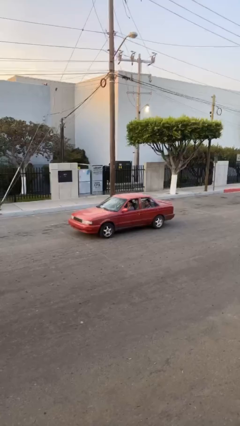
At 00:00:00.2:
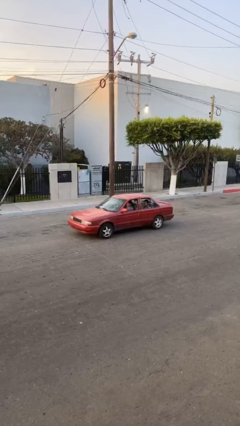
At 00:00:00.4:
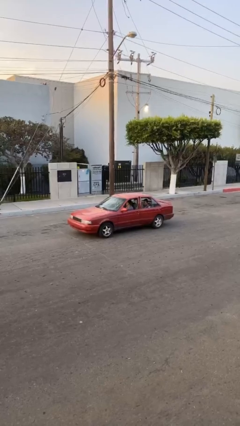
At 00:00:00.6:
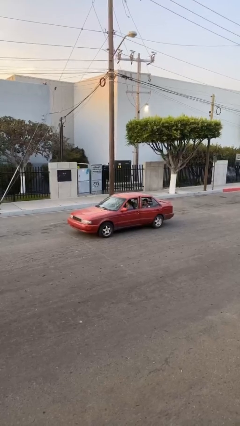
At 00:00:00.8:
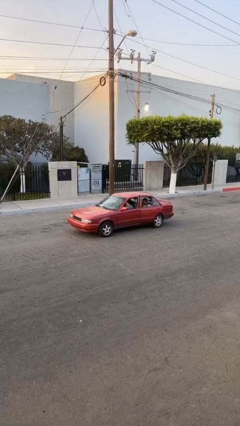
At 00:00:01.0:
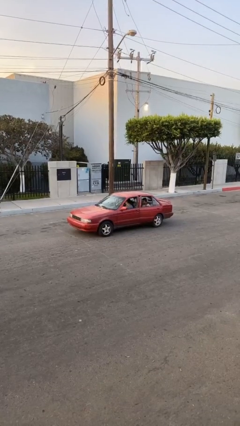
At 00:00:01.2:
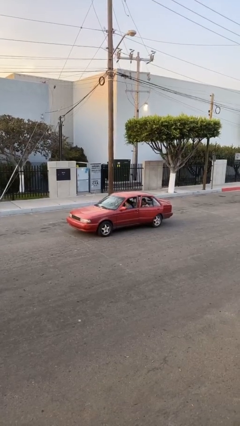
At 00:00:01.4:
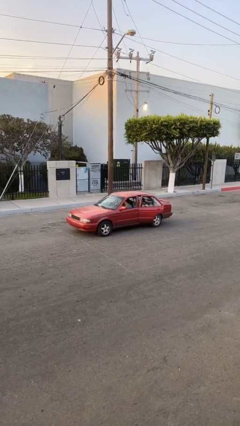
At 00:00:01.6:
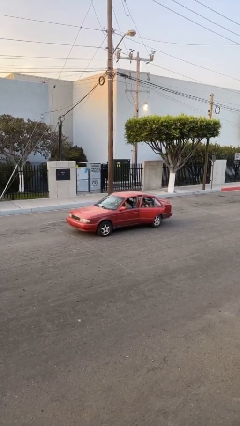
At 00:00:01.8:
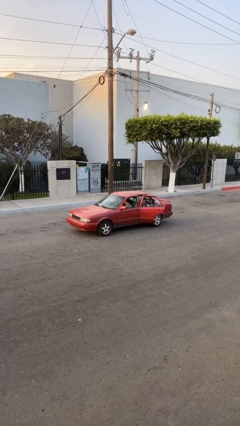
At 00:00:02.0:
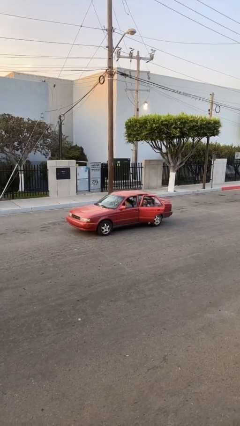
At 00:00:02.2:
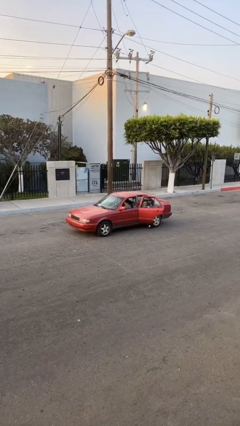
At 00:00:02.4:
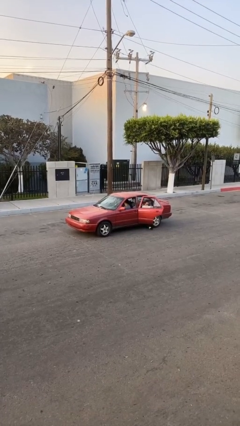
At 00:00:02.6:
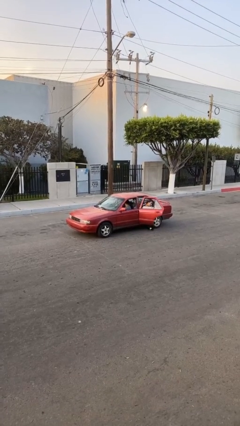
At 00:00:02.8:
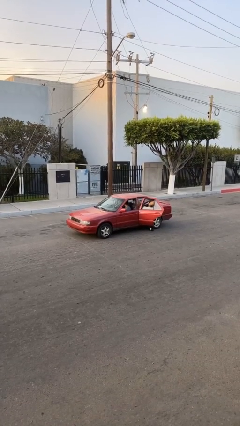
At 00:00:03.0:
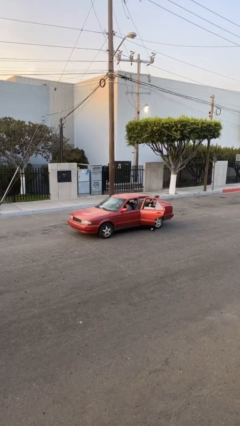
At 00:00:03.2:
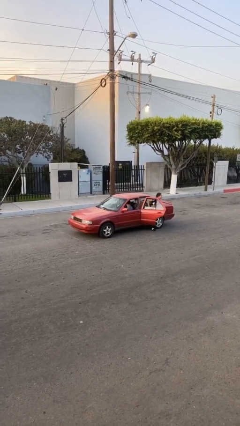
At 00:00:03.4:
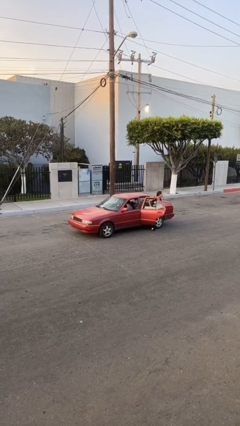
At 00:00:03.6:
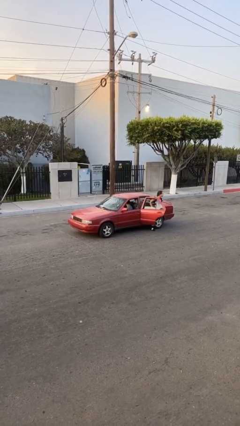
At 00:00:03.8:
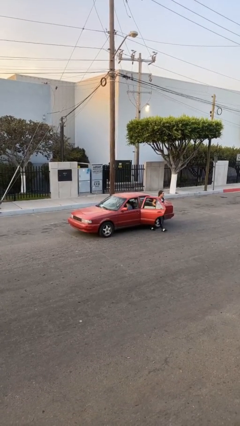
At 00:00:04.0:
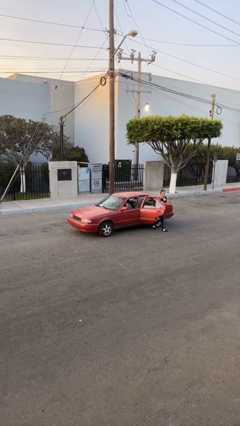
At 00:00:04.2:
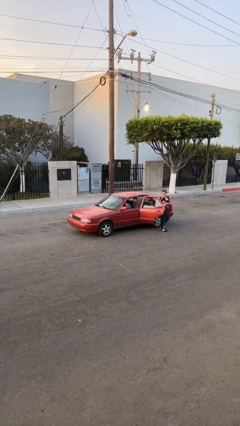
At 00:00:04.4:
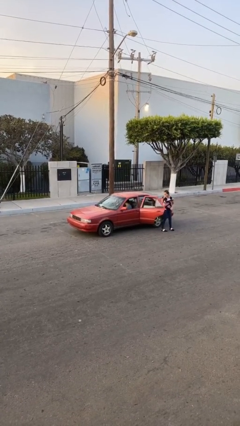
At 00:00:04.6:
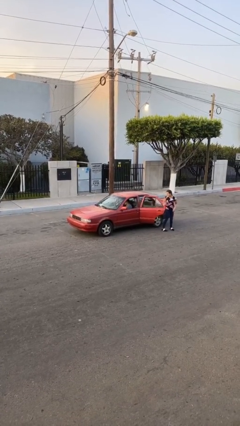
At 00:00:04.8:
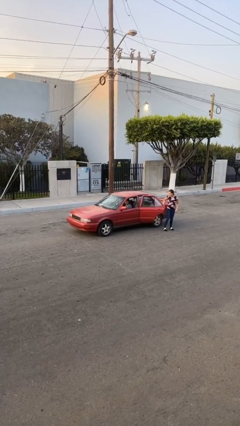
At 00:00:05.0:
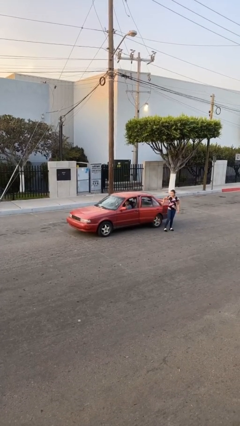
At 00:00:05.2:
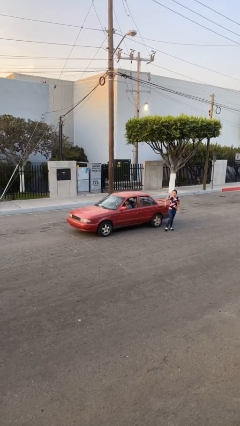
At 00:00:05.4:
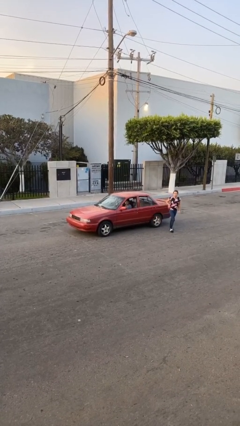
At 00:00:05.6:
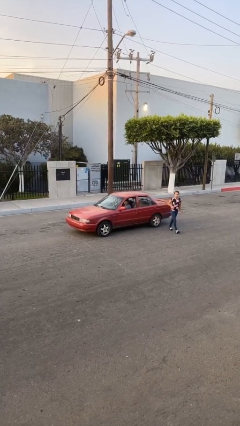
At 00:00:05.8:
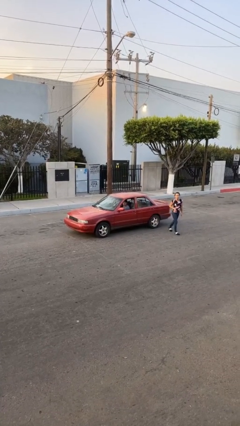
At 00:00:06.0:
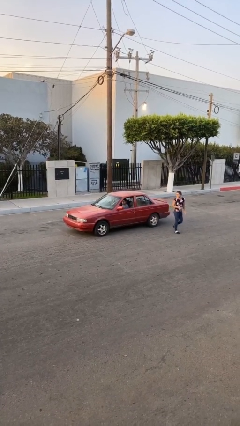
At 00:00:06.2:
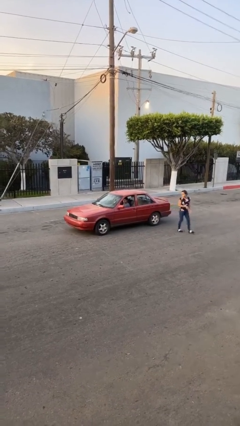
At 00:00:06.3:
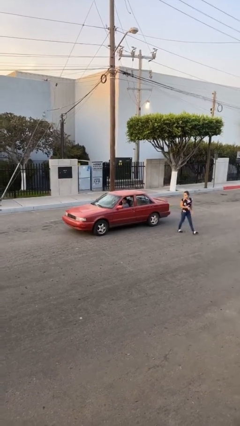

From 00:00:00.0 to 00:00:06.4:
car drops off person

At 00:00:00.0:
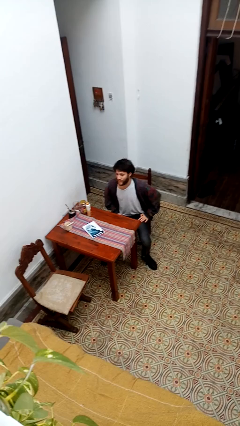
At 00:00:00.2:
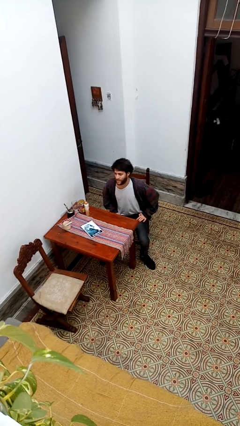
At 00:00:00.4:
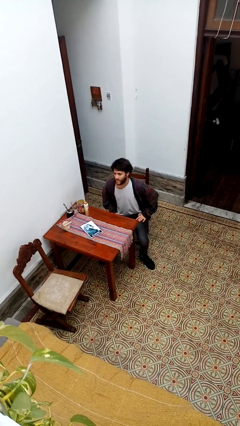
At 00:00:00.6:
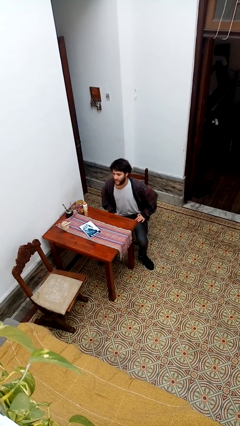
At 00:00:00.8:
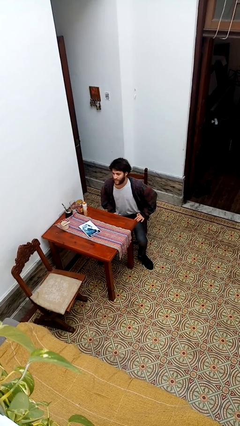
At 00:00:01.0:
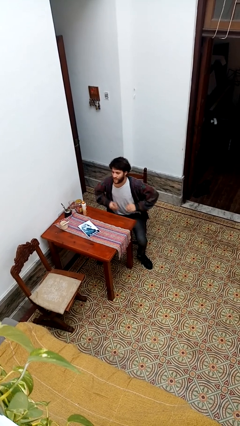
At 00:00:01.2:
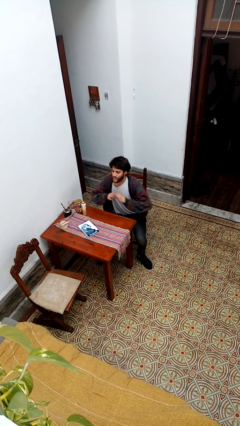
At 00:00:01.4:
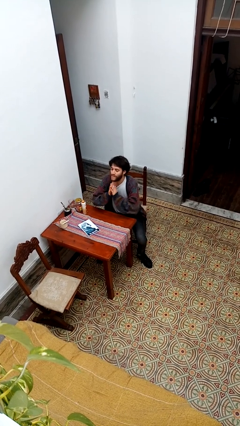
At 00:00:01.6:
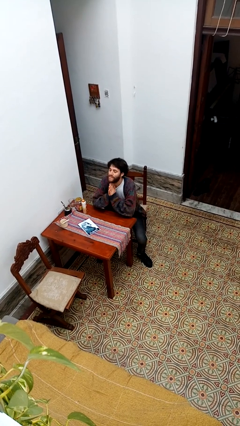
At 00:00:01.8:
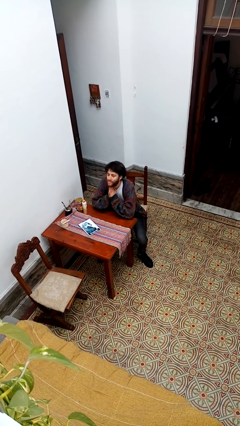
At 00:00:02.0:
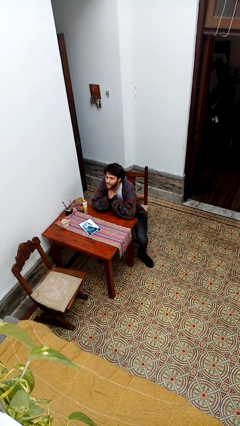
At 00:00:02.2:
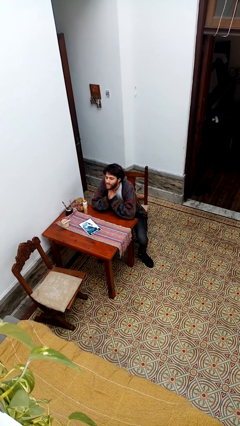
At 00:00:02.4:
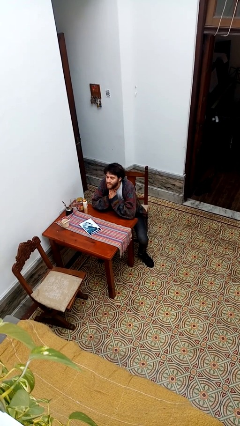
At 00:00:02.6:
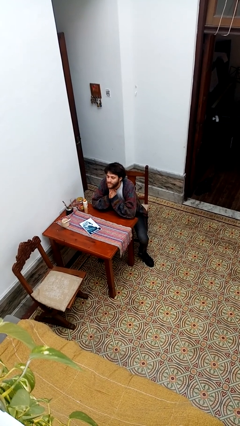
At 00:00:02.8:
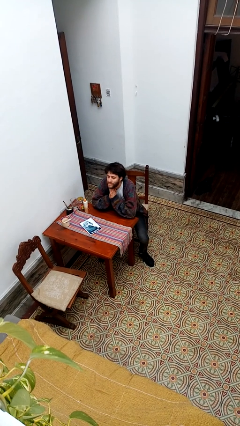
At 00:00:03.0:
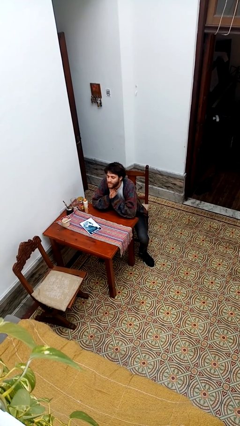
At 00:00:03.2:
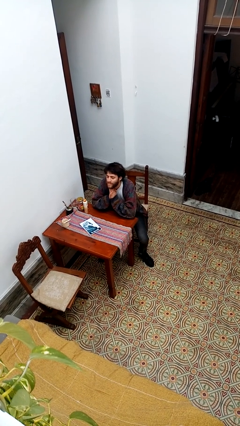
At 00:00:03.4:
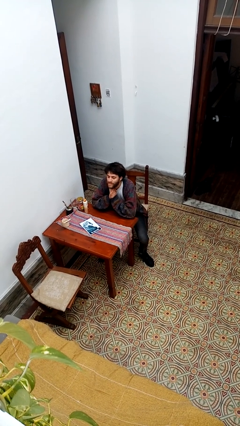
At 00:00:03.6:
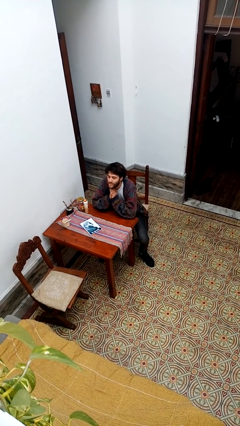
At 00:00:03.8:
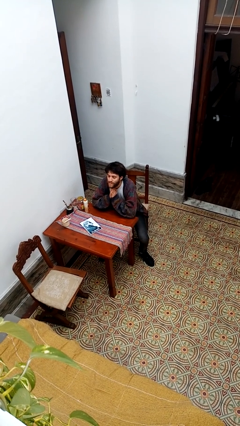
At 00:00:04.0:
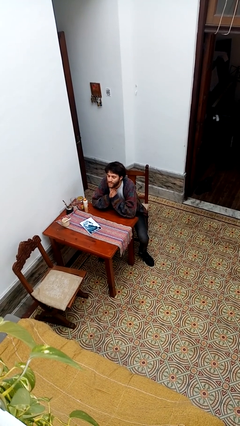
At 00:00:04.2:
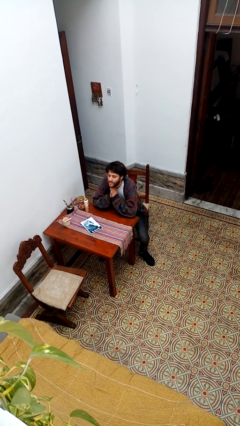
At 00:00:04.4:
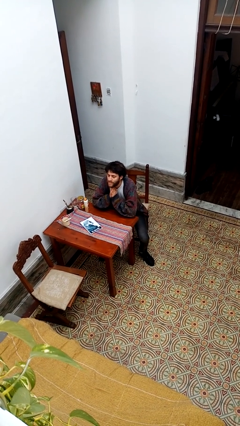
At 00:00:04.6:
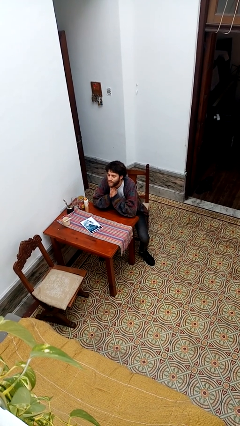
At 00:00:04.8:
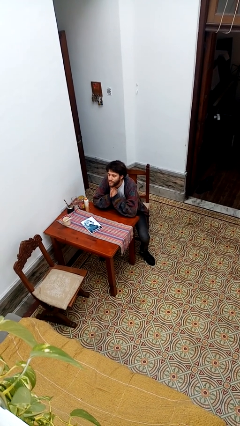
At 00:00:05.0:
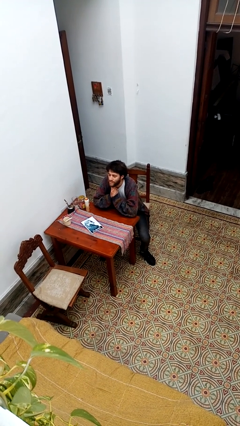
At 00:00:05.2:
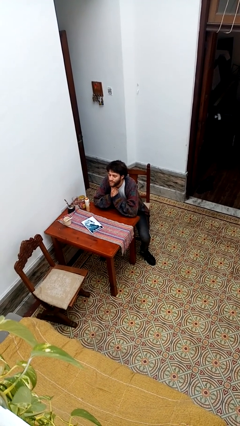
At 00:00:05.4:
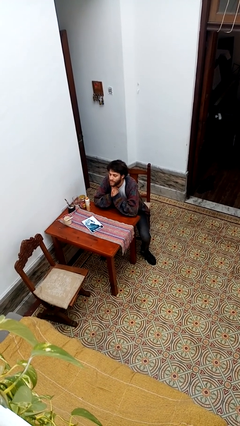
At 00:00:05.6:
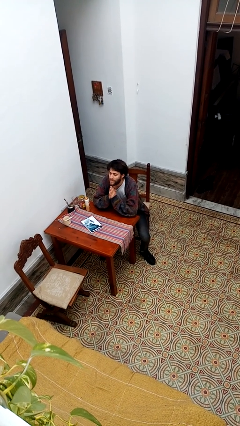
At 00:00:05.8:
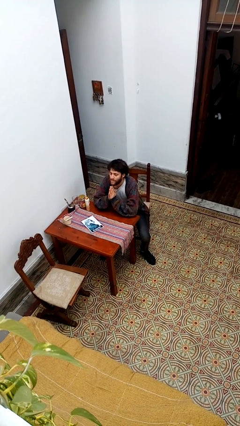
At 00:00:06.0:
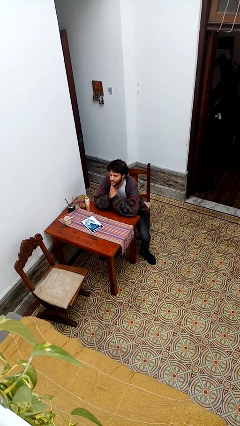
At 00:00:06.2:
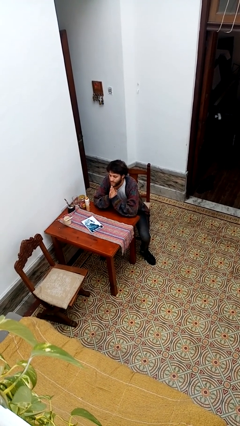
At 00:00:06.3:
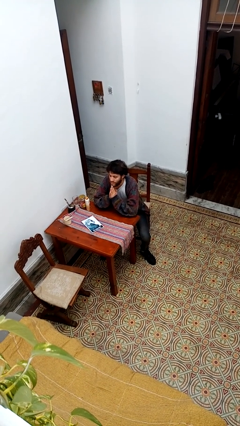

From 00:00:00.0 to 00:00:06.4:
person prays

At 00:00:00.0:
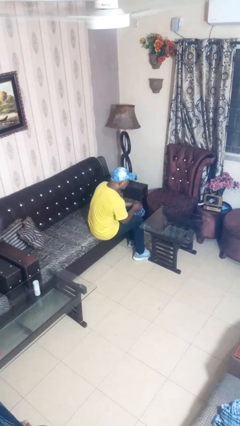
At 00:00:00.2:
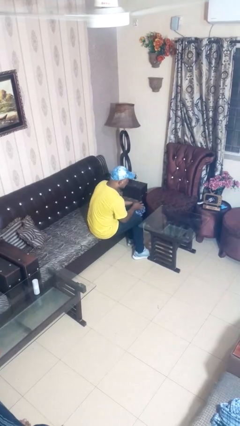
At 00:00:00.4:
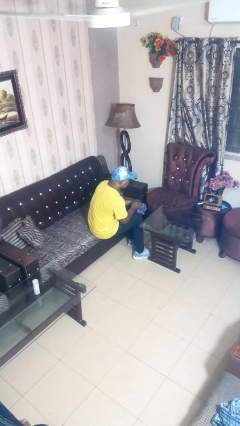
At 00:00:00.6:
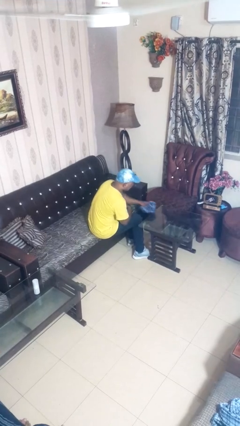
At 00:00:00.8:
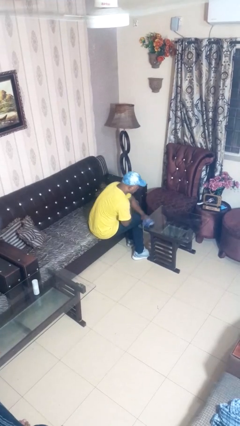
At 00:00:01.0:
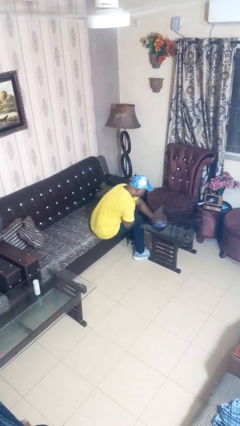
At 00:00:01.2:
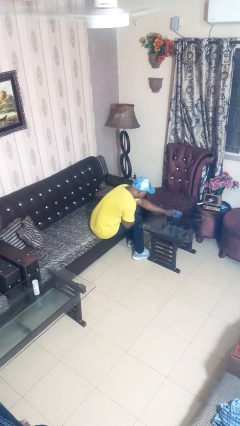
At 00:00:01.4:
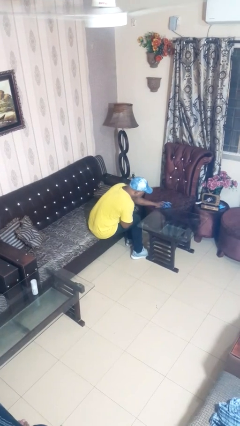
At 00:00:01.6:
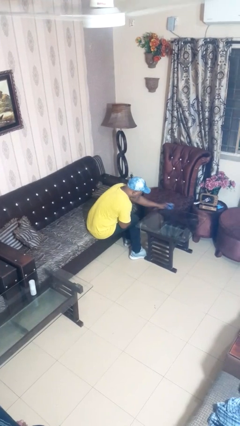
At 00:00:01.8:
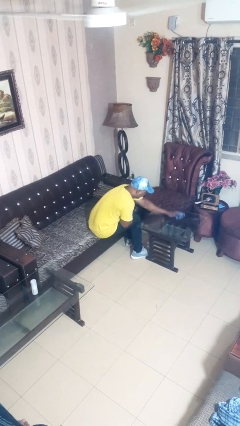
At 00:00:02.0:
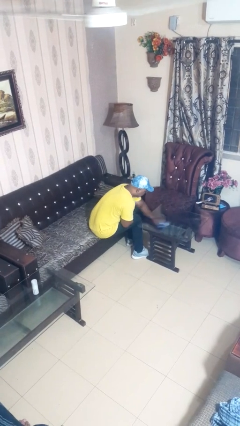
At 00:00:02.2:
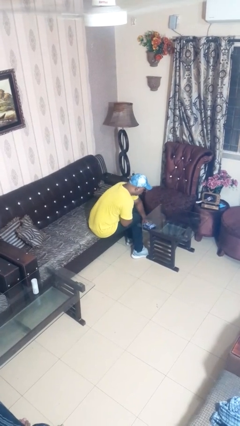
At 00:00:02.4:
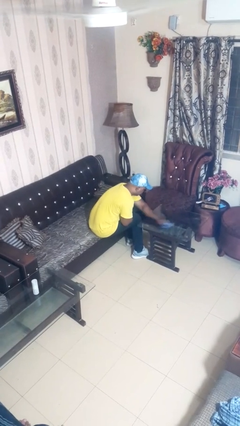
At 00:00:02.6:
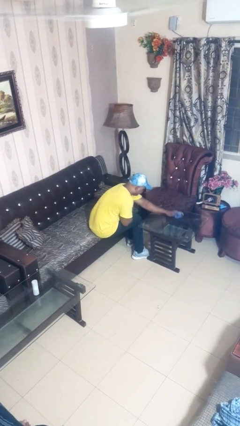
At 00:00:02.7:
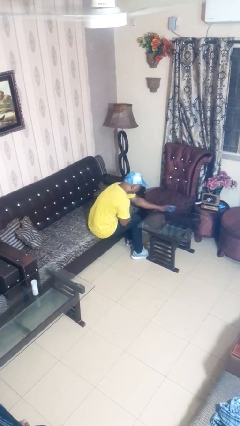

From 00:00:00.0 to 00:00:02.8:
person cleans table with rag

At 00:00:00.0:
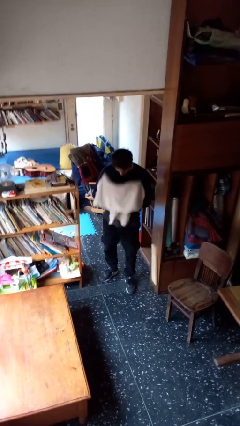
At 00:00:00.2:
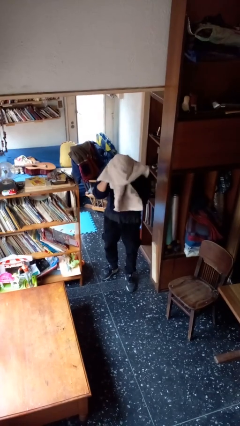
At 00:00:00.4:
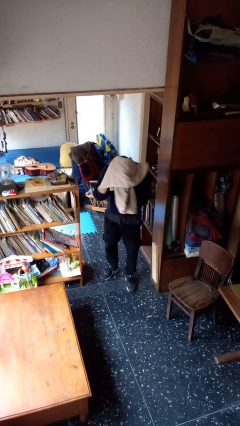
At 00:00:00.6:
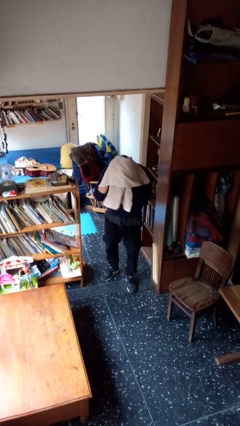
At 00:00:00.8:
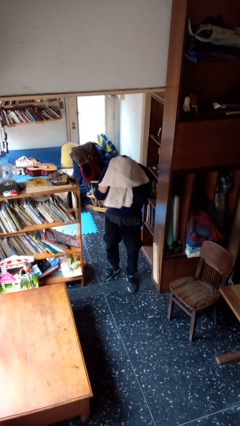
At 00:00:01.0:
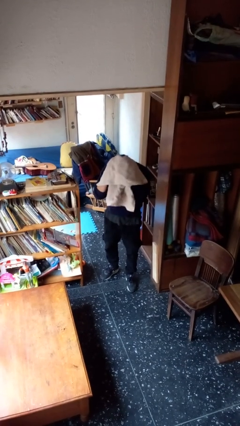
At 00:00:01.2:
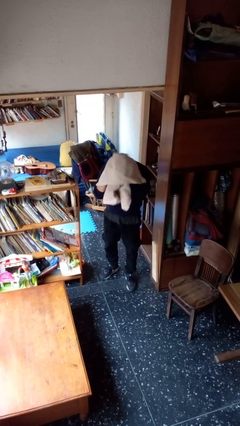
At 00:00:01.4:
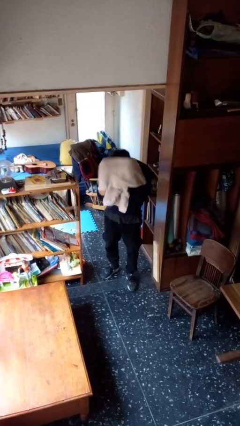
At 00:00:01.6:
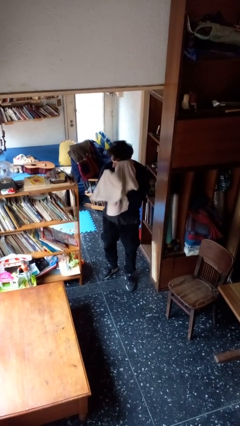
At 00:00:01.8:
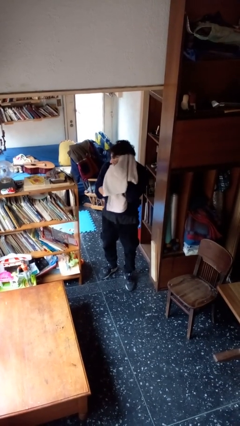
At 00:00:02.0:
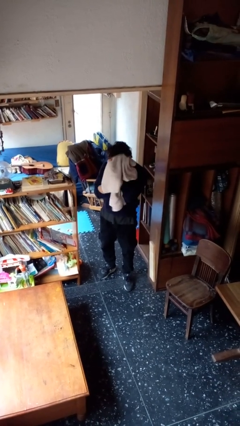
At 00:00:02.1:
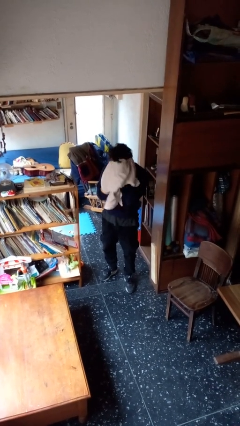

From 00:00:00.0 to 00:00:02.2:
person dries hair with towel

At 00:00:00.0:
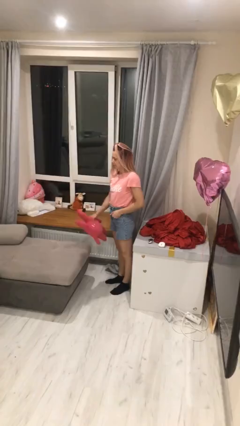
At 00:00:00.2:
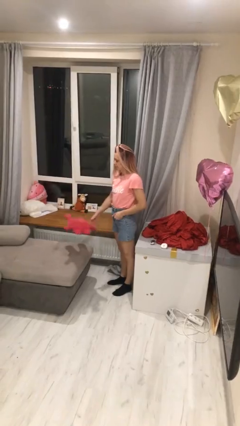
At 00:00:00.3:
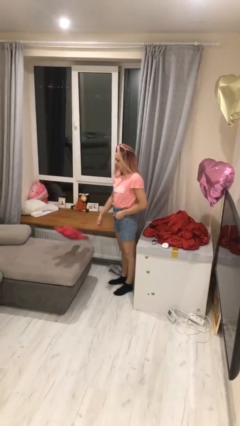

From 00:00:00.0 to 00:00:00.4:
person throws object on bed
